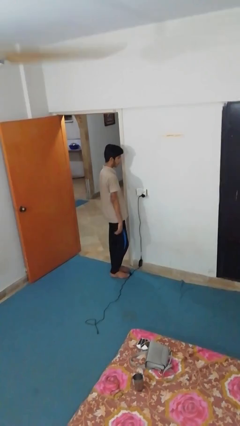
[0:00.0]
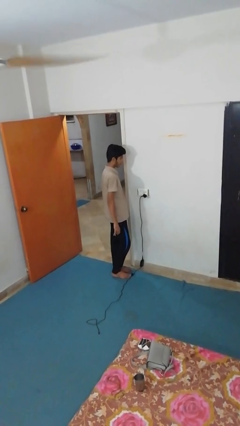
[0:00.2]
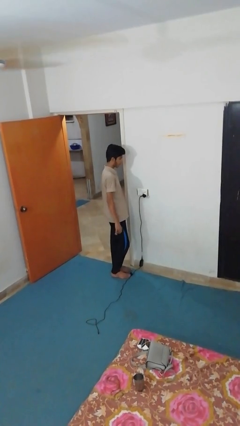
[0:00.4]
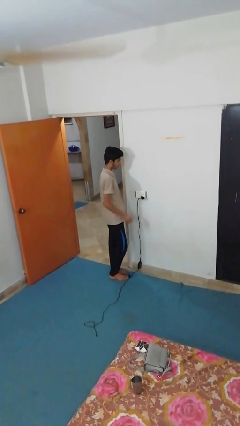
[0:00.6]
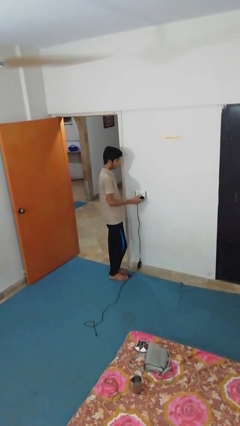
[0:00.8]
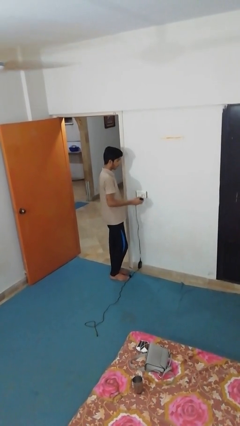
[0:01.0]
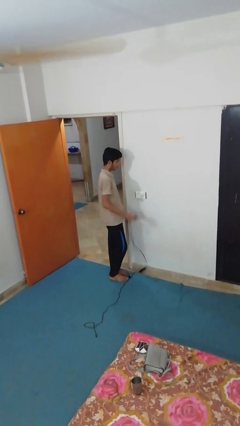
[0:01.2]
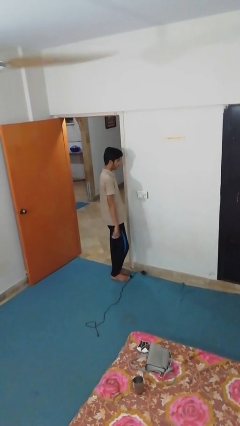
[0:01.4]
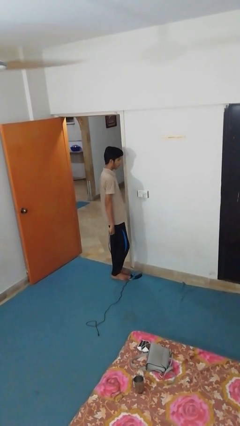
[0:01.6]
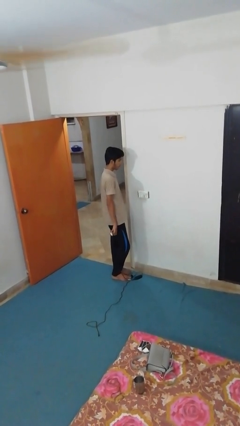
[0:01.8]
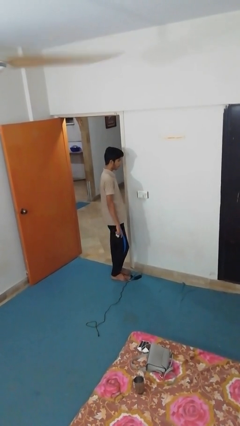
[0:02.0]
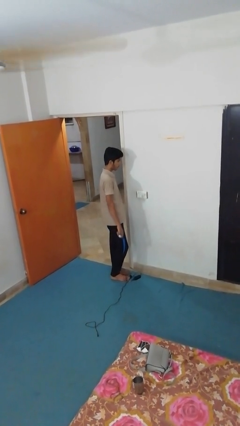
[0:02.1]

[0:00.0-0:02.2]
person plugs into electrical socket

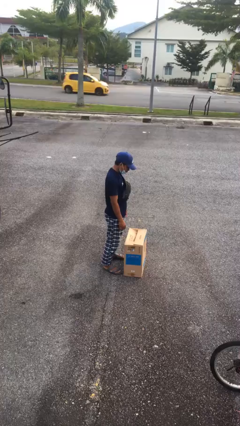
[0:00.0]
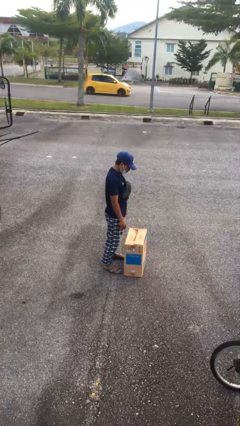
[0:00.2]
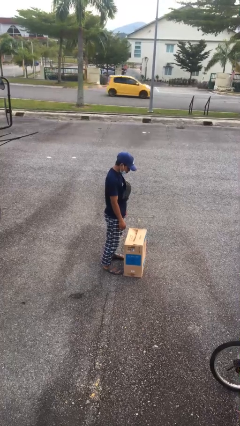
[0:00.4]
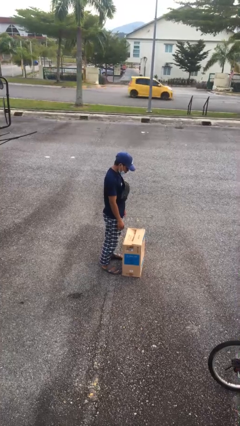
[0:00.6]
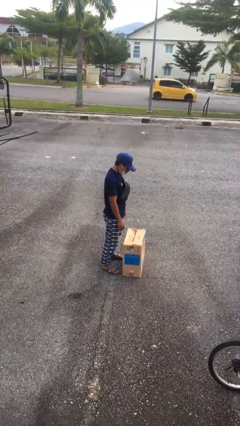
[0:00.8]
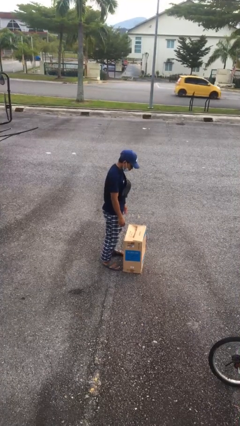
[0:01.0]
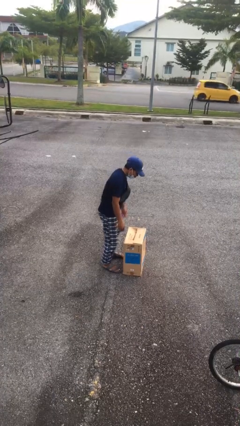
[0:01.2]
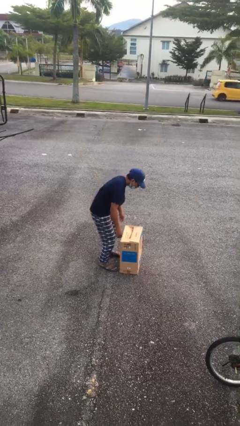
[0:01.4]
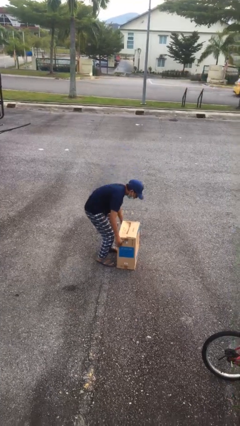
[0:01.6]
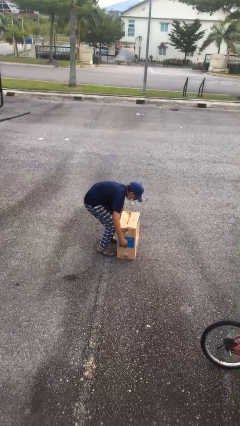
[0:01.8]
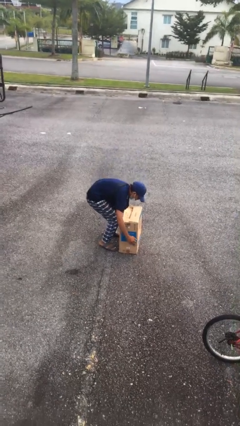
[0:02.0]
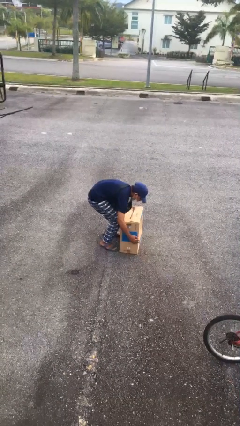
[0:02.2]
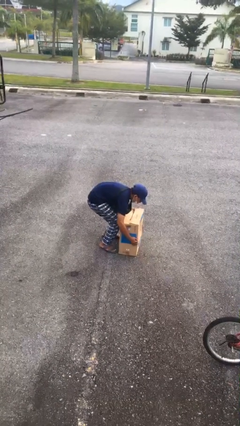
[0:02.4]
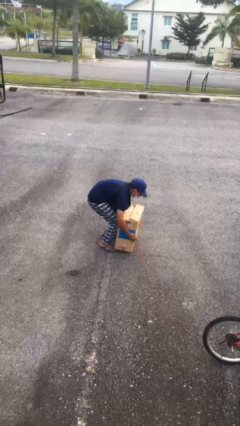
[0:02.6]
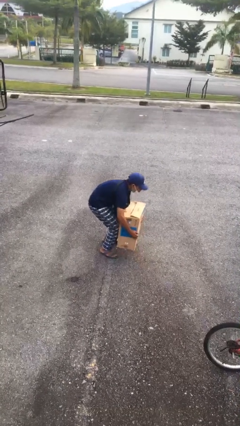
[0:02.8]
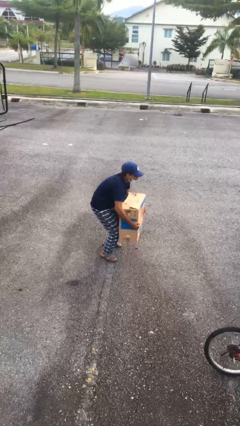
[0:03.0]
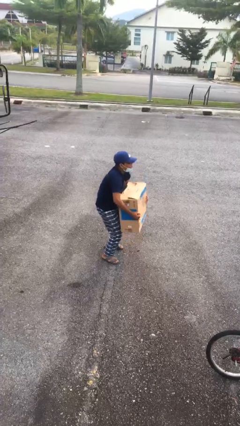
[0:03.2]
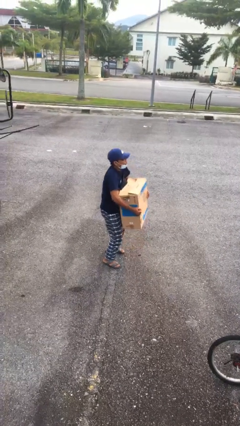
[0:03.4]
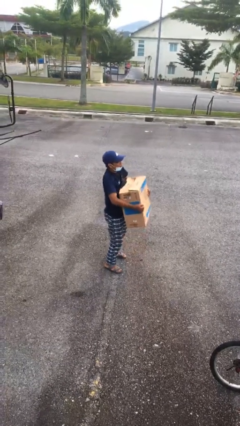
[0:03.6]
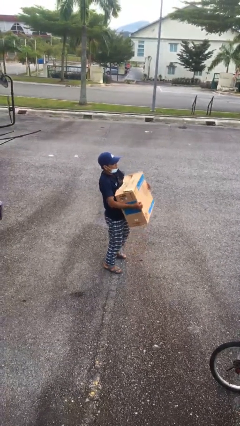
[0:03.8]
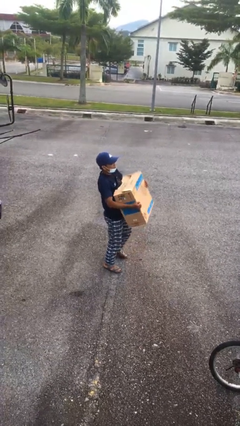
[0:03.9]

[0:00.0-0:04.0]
person picks up object from floor

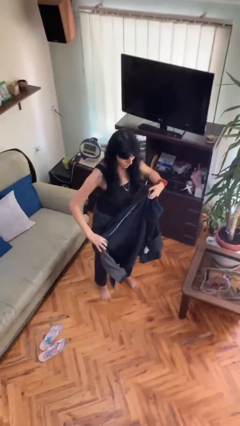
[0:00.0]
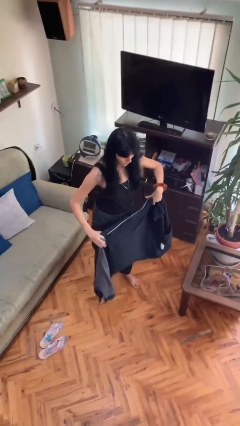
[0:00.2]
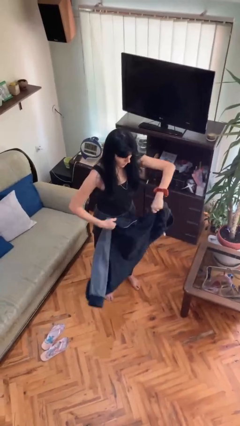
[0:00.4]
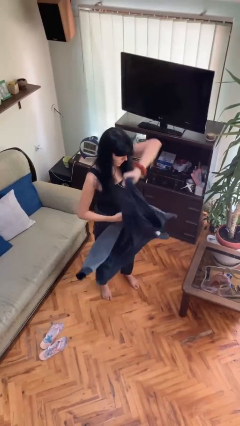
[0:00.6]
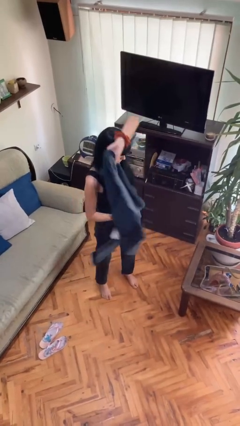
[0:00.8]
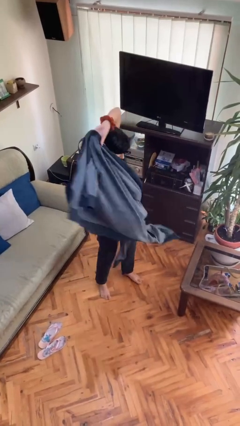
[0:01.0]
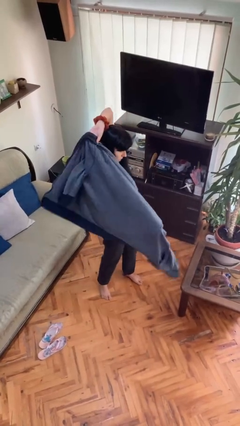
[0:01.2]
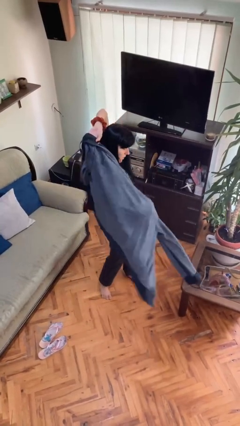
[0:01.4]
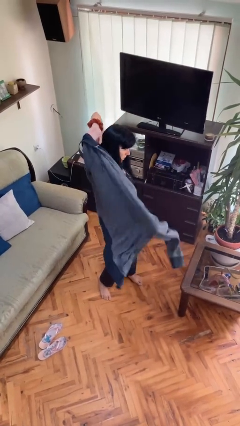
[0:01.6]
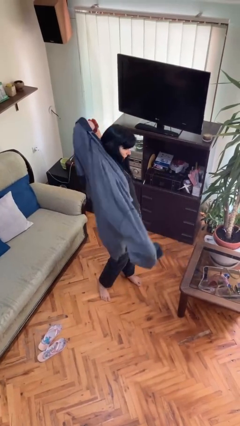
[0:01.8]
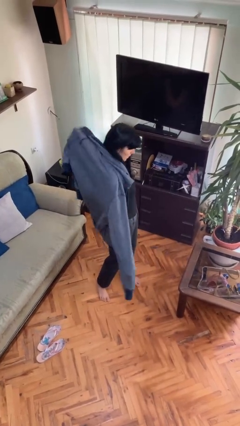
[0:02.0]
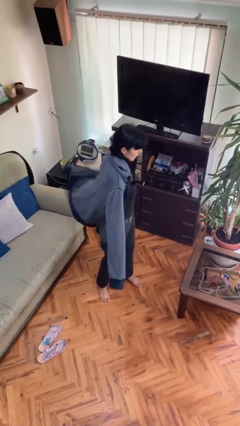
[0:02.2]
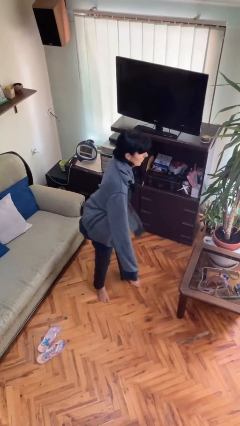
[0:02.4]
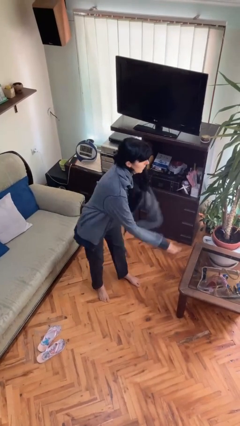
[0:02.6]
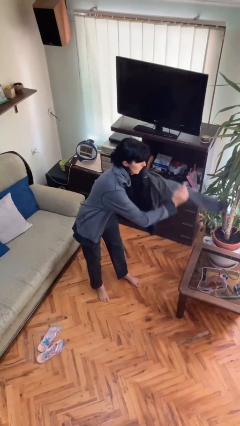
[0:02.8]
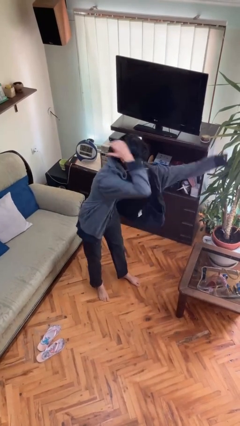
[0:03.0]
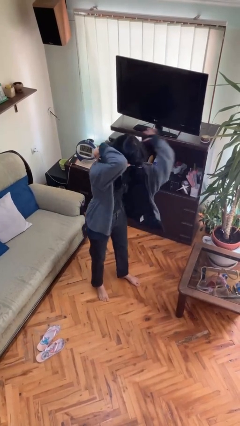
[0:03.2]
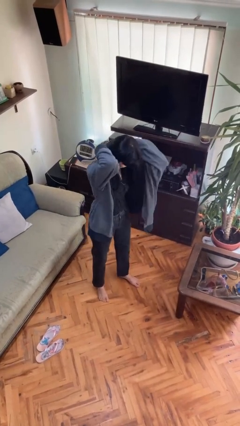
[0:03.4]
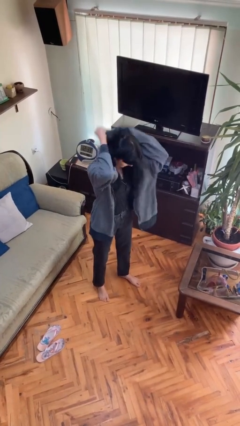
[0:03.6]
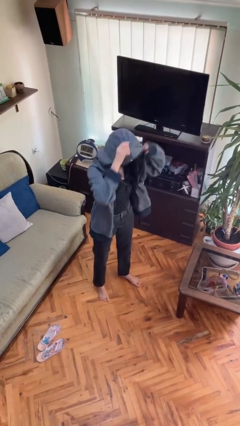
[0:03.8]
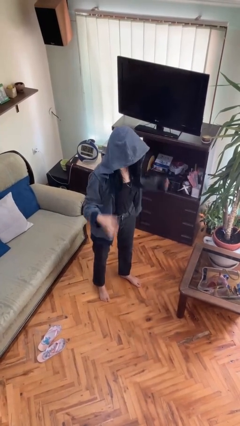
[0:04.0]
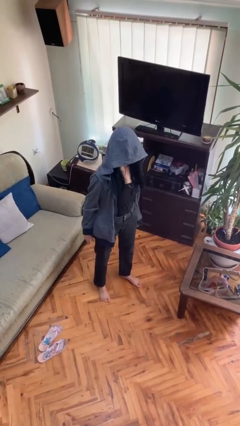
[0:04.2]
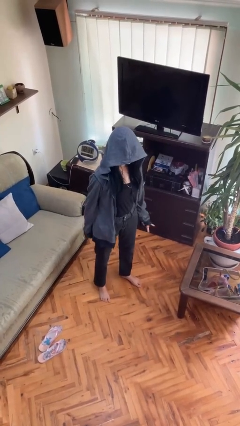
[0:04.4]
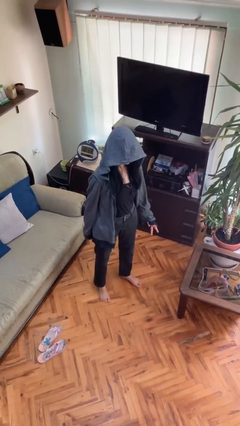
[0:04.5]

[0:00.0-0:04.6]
person puts on hoodie

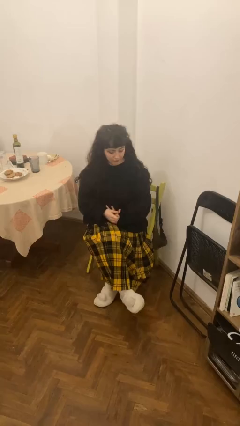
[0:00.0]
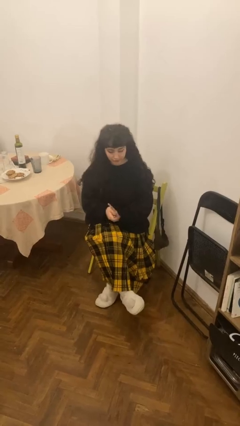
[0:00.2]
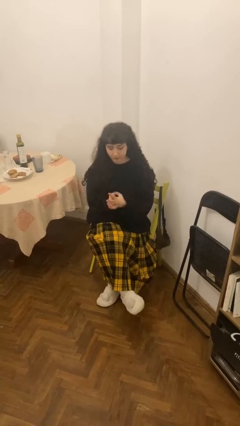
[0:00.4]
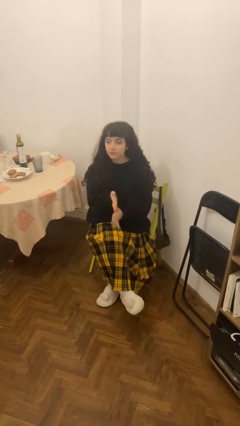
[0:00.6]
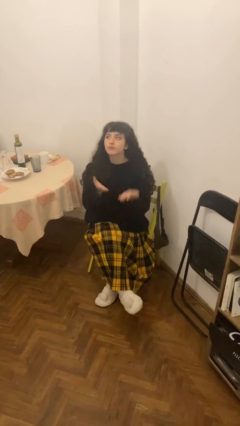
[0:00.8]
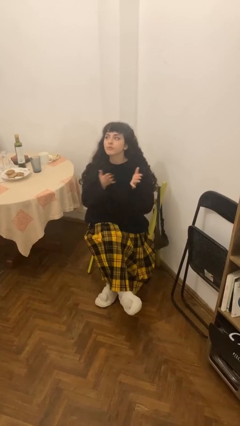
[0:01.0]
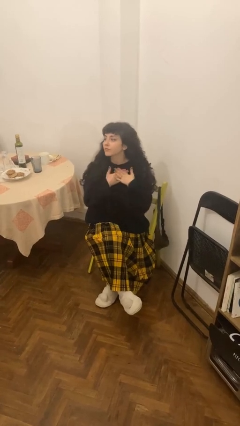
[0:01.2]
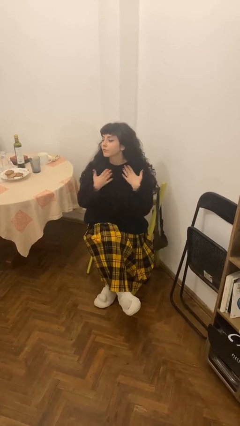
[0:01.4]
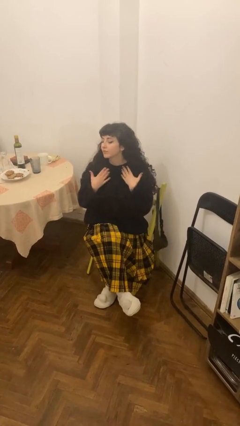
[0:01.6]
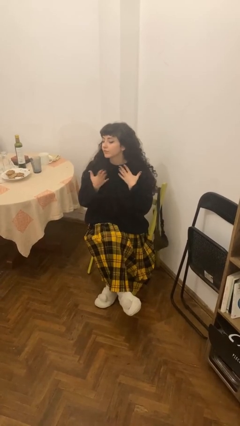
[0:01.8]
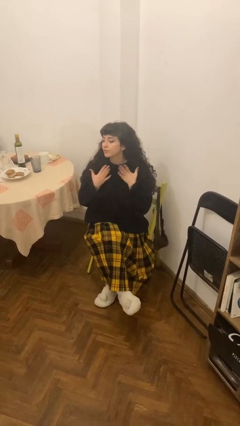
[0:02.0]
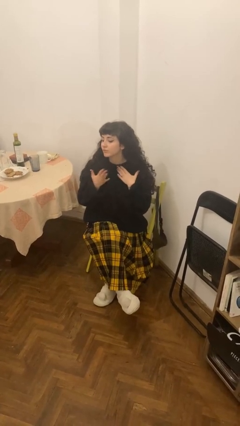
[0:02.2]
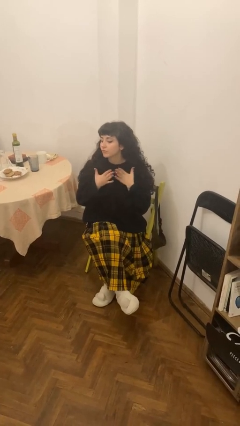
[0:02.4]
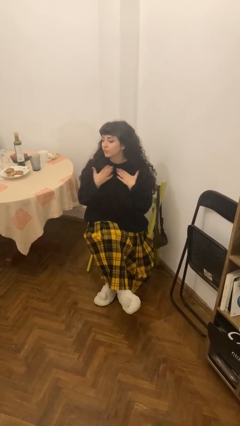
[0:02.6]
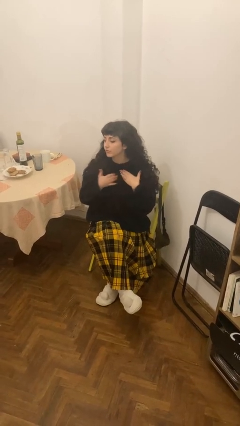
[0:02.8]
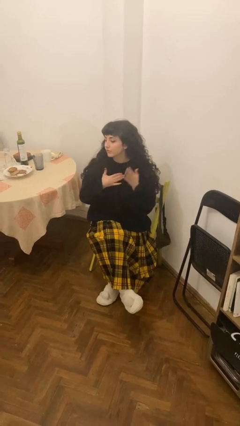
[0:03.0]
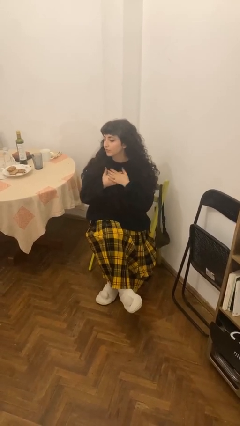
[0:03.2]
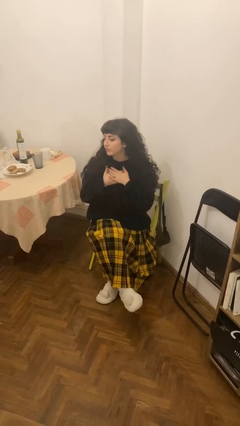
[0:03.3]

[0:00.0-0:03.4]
person drums on chest

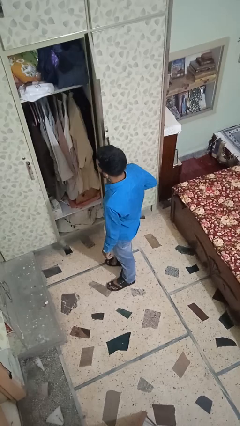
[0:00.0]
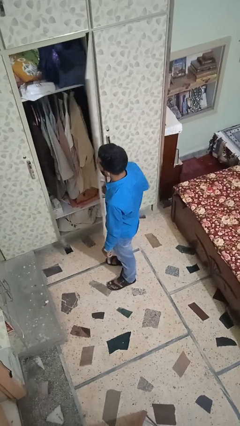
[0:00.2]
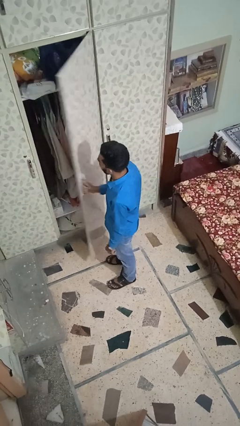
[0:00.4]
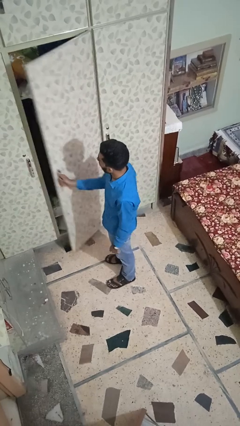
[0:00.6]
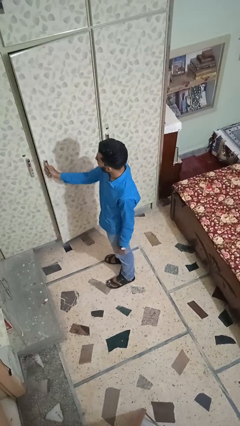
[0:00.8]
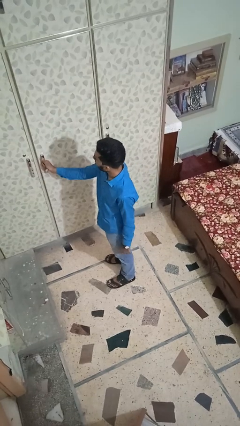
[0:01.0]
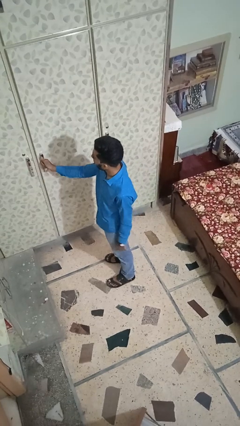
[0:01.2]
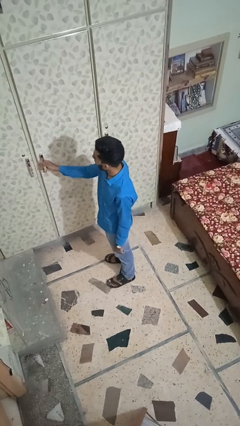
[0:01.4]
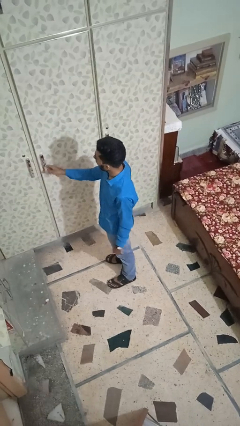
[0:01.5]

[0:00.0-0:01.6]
person closes closet door

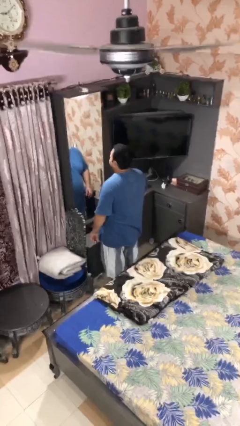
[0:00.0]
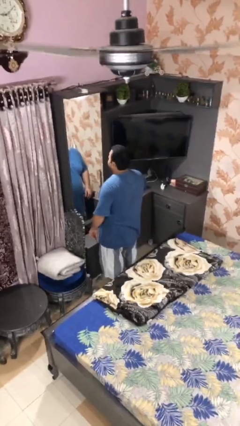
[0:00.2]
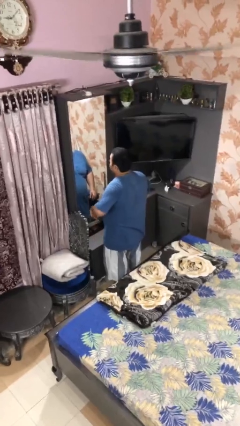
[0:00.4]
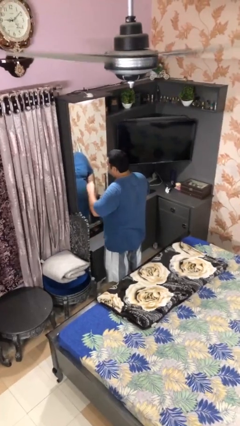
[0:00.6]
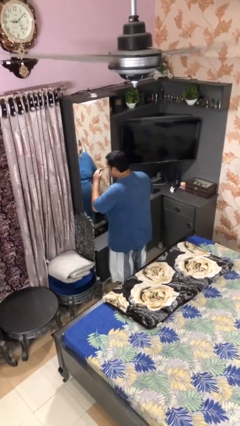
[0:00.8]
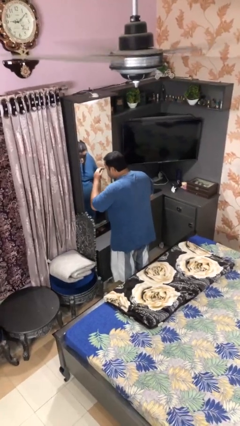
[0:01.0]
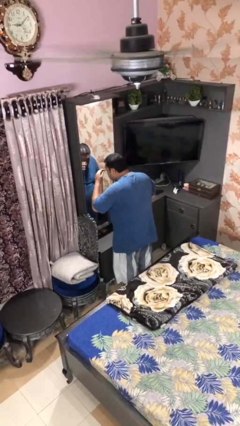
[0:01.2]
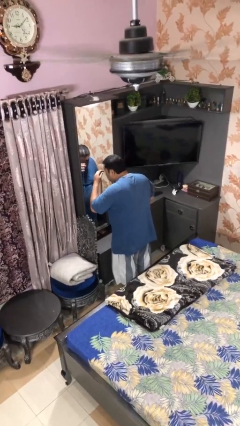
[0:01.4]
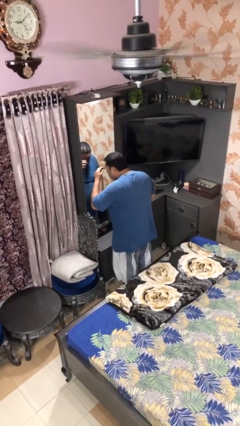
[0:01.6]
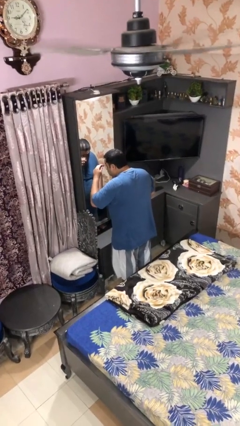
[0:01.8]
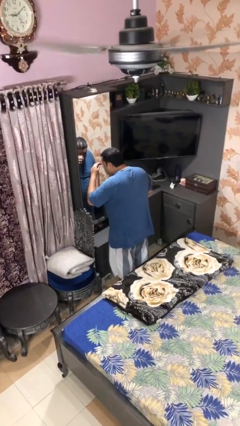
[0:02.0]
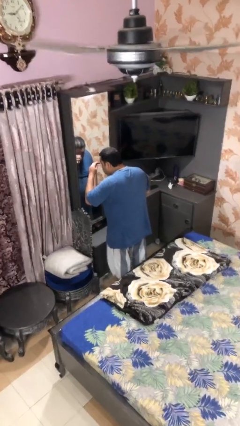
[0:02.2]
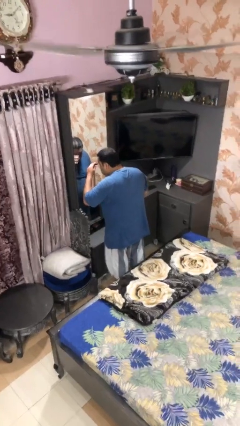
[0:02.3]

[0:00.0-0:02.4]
person applies eye makeup
